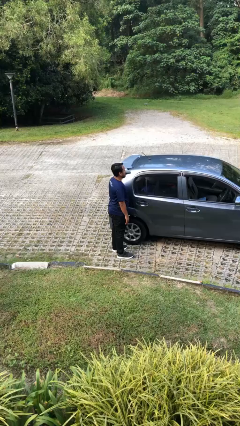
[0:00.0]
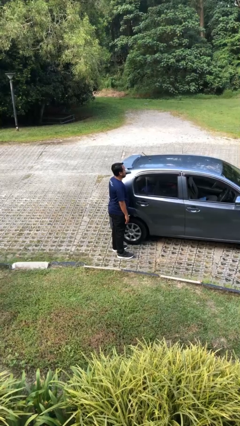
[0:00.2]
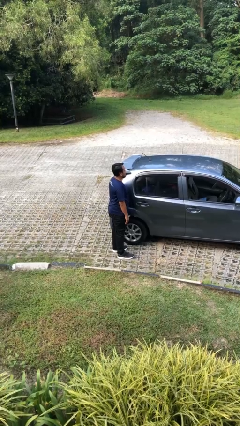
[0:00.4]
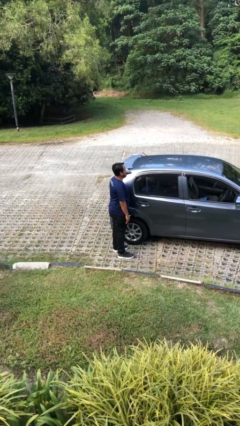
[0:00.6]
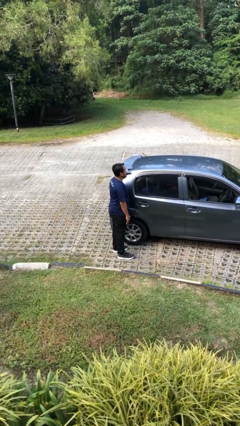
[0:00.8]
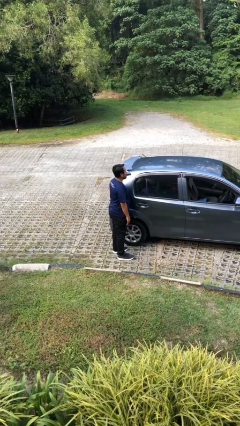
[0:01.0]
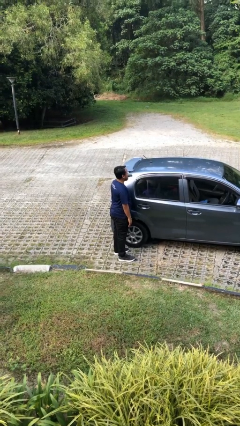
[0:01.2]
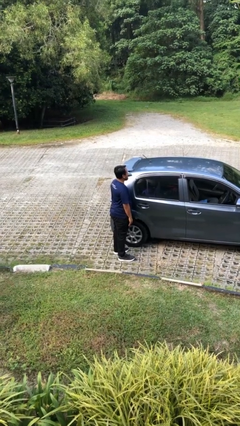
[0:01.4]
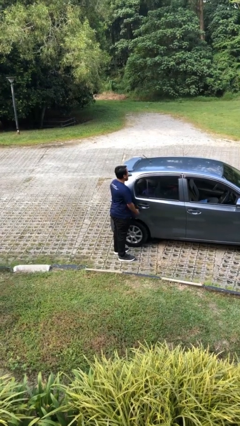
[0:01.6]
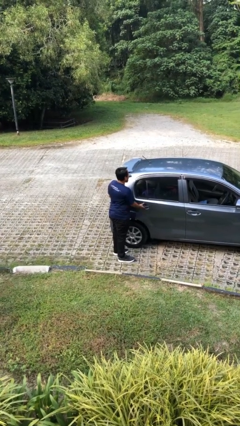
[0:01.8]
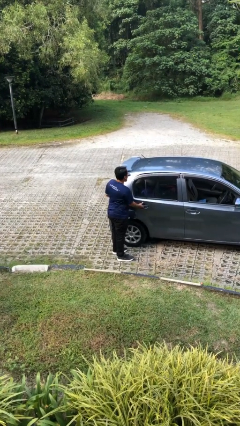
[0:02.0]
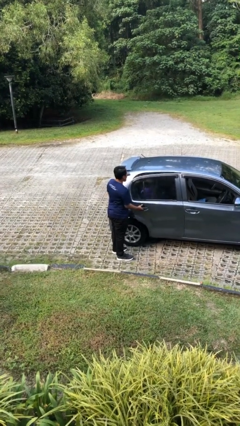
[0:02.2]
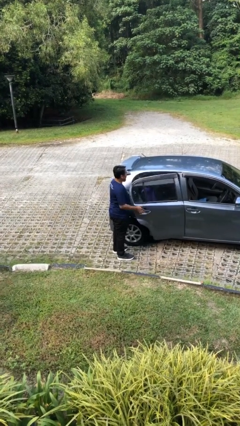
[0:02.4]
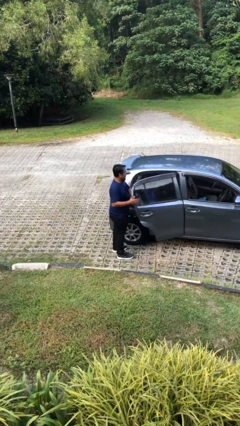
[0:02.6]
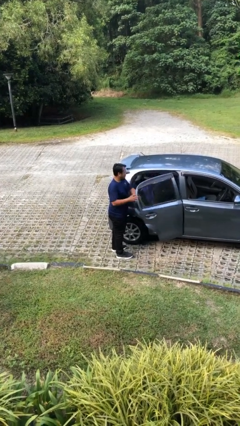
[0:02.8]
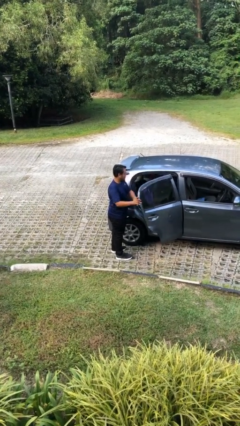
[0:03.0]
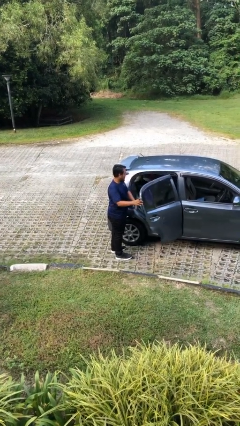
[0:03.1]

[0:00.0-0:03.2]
person opens car door

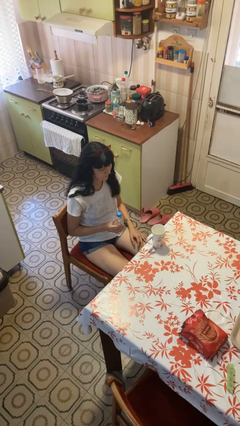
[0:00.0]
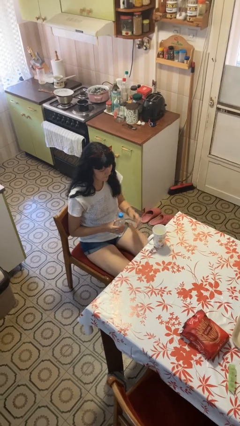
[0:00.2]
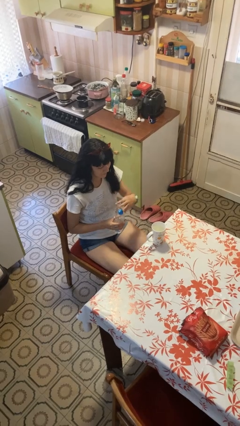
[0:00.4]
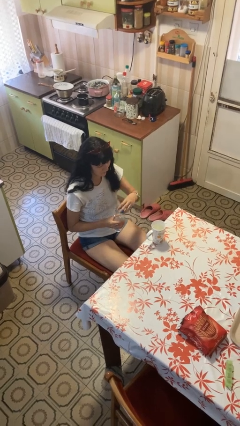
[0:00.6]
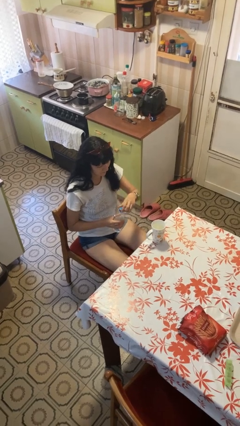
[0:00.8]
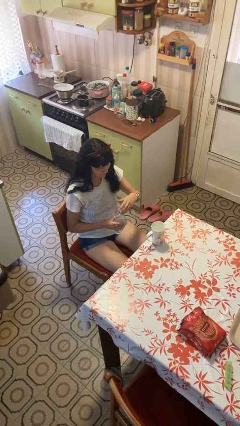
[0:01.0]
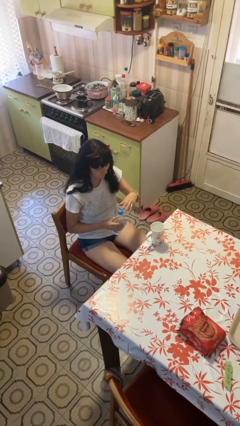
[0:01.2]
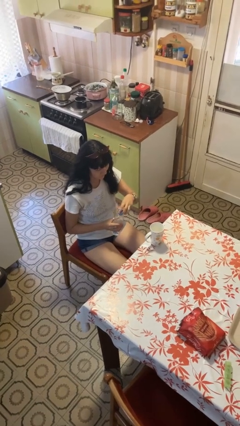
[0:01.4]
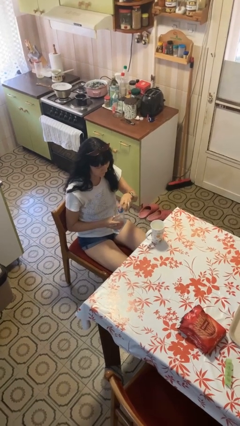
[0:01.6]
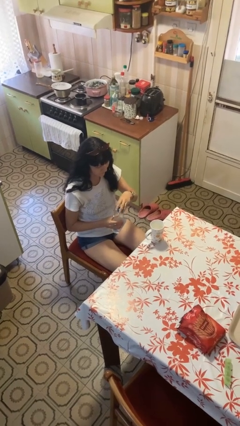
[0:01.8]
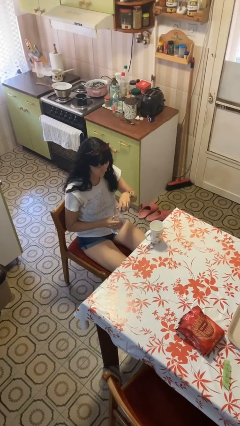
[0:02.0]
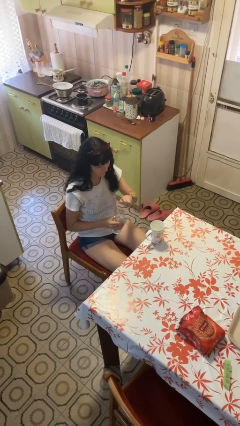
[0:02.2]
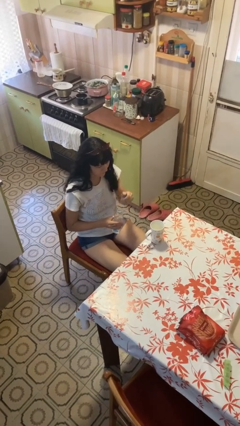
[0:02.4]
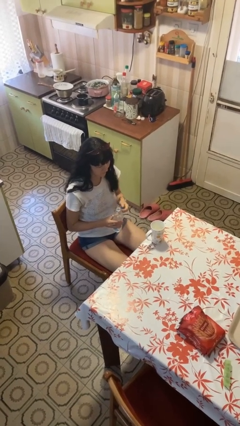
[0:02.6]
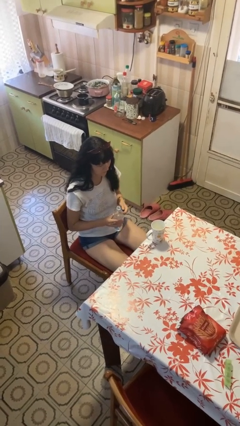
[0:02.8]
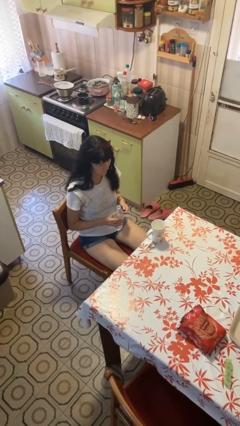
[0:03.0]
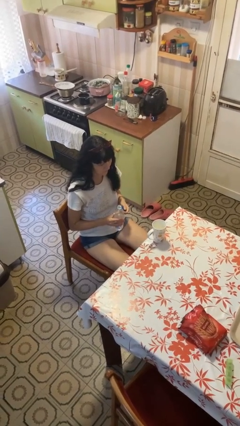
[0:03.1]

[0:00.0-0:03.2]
person unscrews lid from bottle

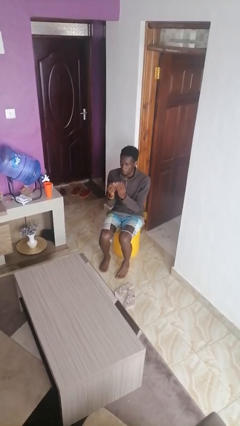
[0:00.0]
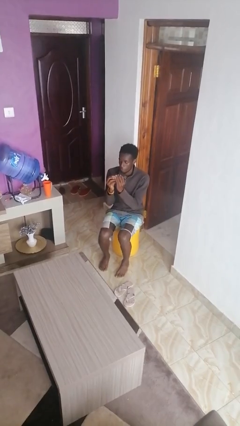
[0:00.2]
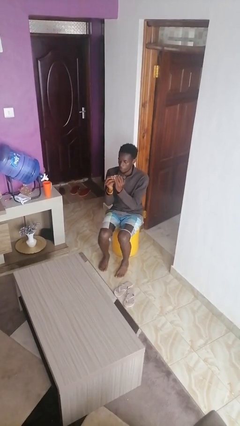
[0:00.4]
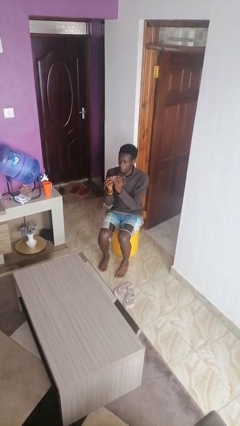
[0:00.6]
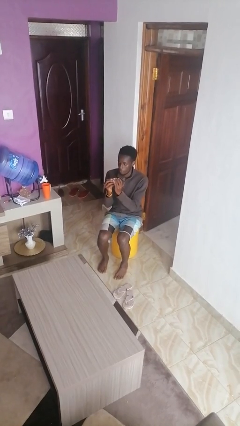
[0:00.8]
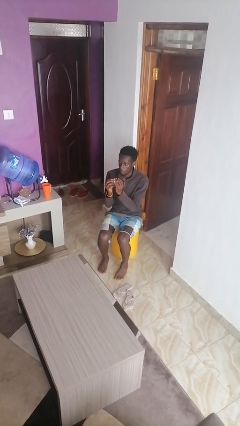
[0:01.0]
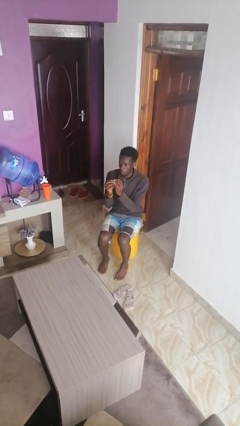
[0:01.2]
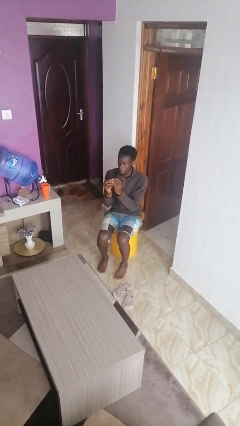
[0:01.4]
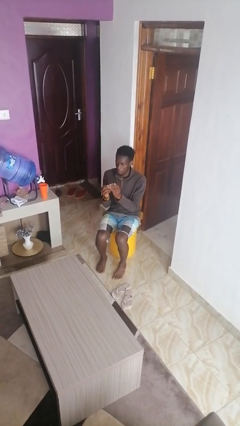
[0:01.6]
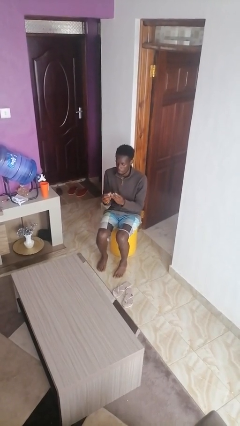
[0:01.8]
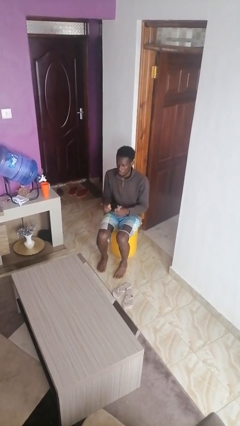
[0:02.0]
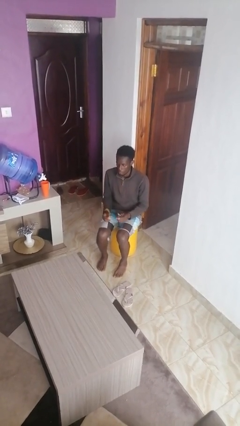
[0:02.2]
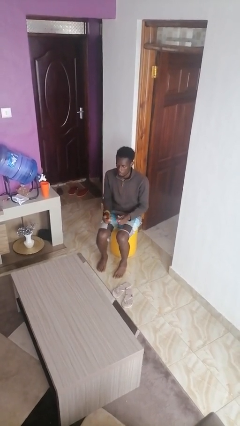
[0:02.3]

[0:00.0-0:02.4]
person clips fingernails

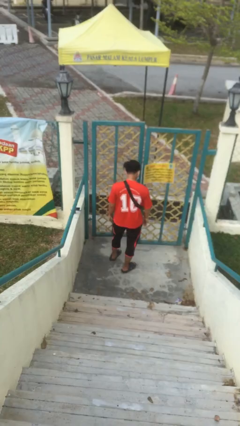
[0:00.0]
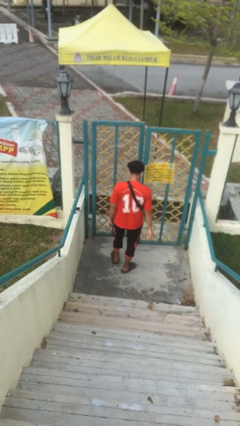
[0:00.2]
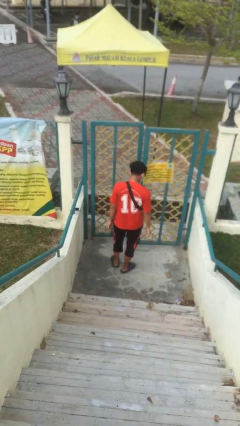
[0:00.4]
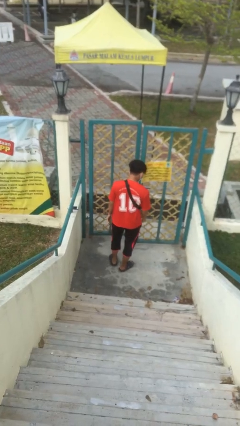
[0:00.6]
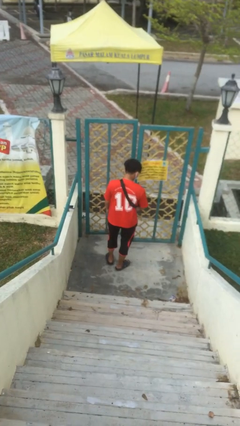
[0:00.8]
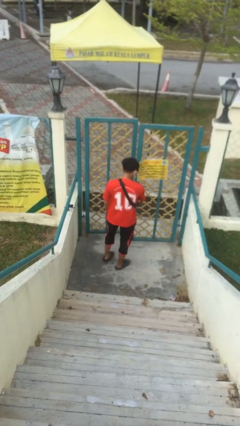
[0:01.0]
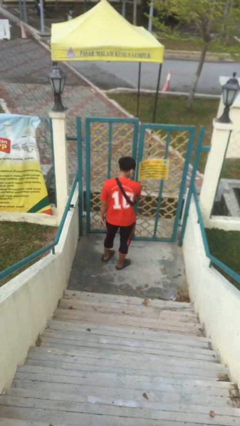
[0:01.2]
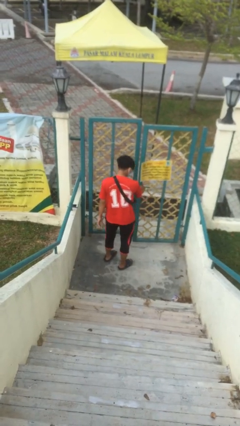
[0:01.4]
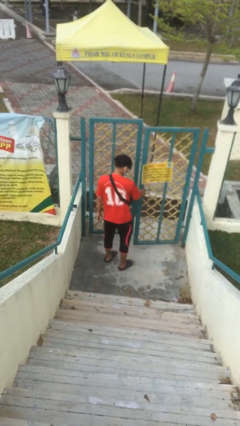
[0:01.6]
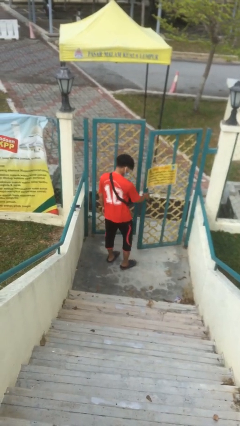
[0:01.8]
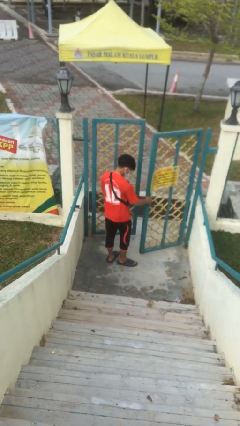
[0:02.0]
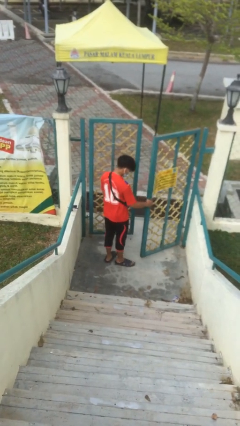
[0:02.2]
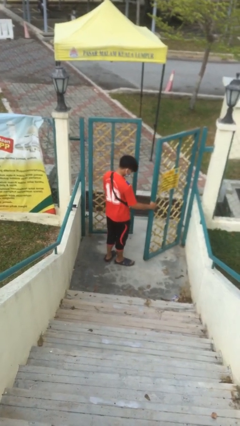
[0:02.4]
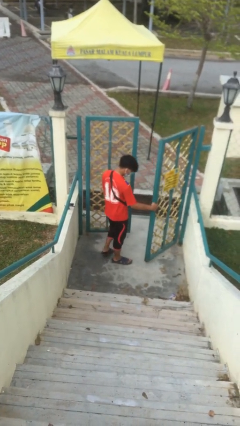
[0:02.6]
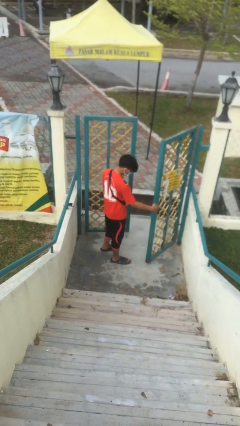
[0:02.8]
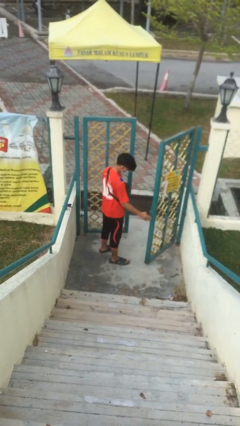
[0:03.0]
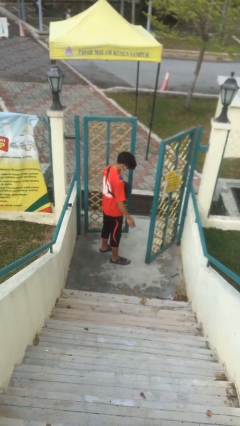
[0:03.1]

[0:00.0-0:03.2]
person opens facility door

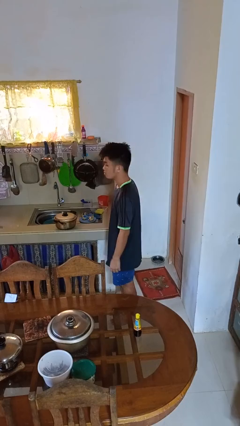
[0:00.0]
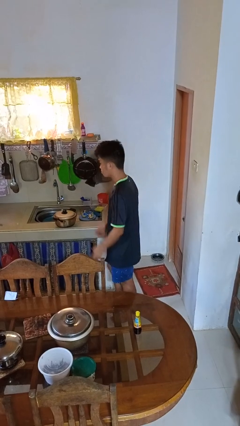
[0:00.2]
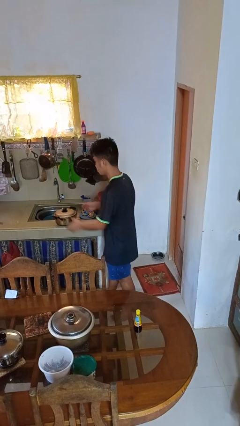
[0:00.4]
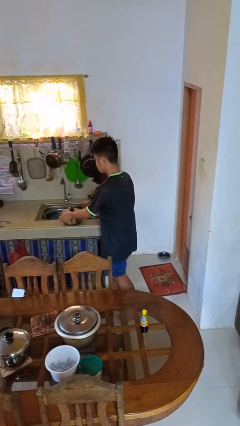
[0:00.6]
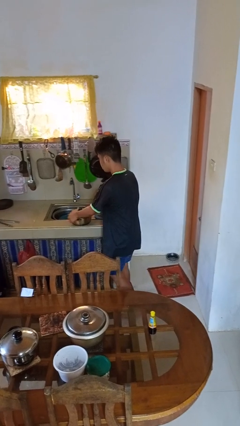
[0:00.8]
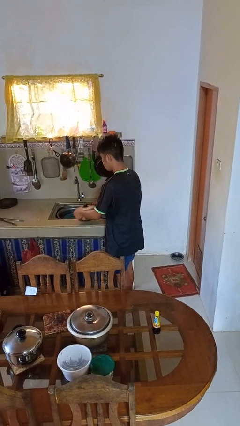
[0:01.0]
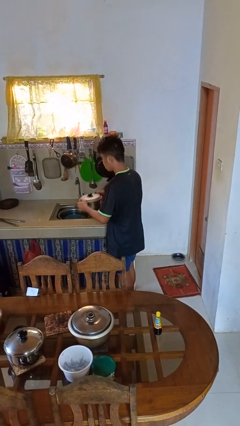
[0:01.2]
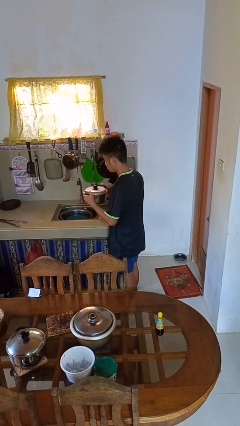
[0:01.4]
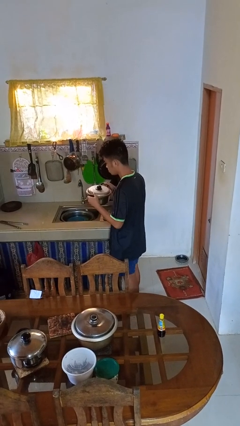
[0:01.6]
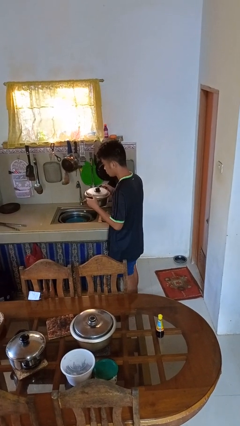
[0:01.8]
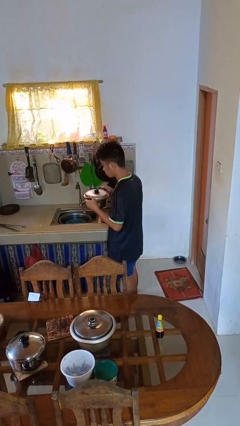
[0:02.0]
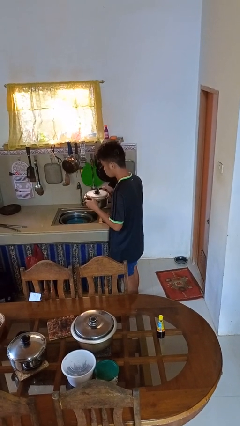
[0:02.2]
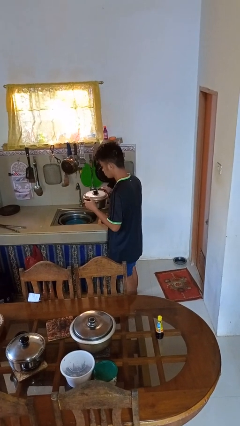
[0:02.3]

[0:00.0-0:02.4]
person picks up object from countertop

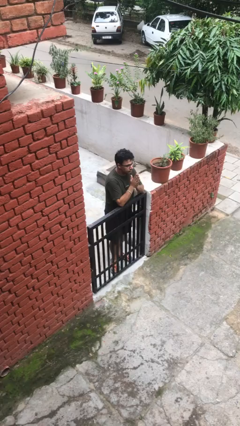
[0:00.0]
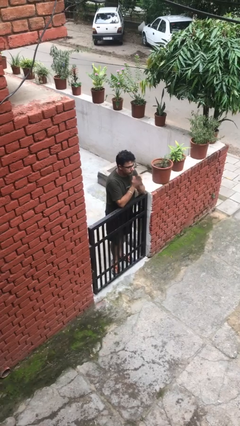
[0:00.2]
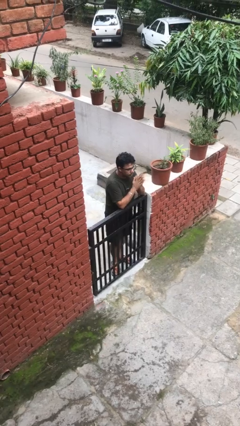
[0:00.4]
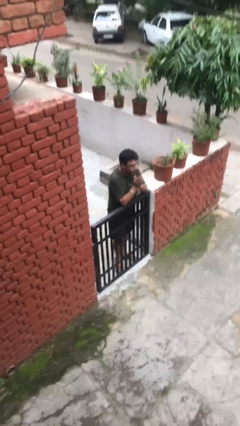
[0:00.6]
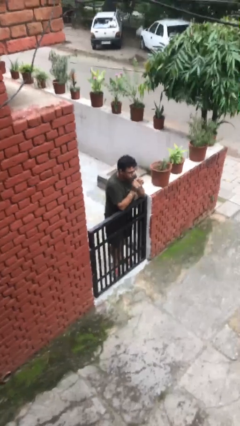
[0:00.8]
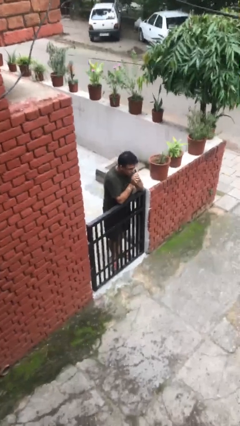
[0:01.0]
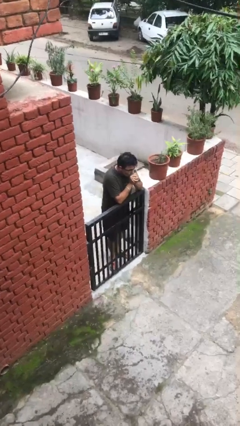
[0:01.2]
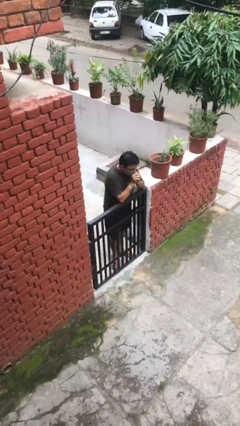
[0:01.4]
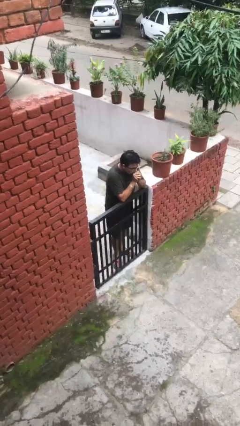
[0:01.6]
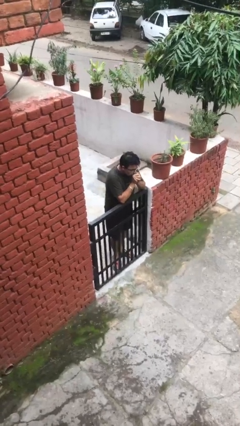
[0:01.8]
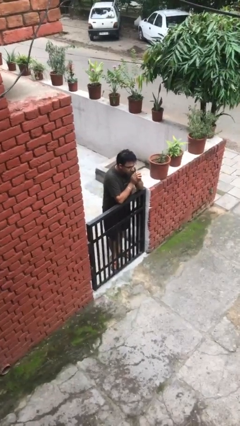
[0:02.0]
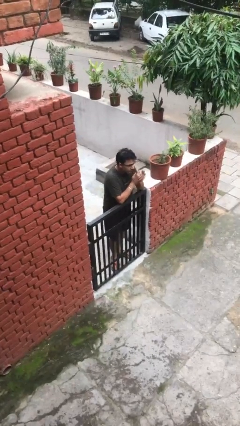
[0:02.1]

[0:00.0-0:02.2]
person blows into hands

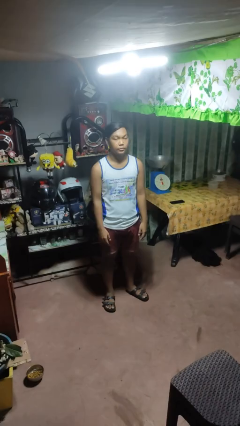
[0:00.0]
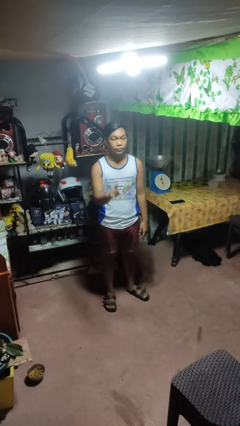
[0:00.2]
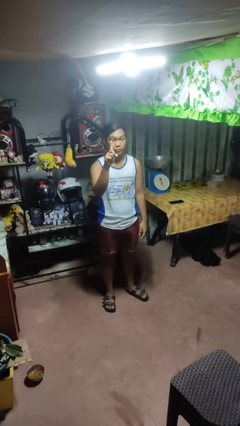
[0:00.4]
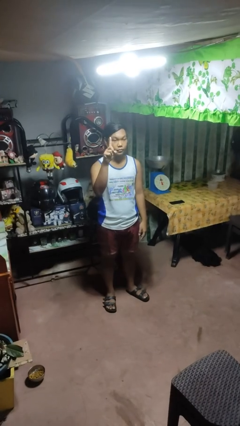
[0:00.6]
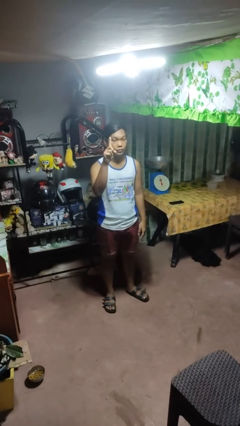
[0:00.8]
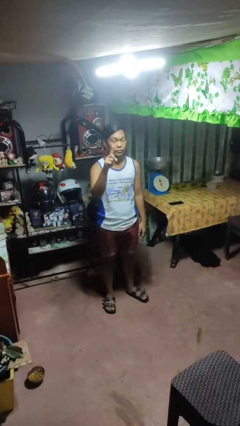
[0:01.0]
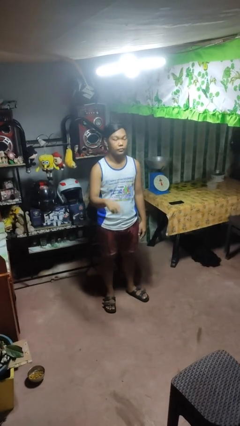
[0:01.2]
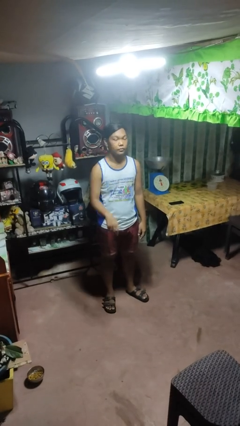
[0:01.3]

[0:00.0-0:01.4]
person gestures number one
